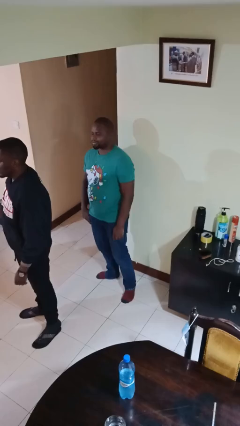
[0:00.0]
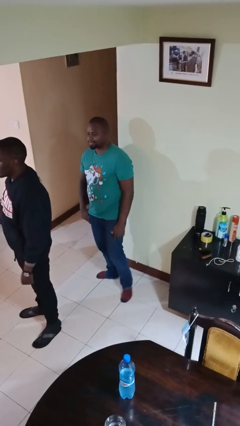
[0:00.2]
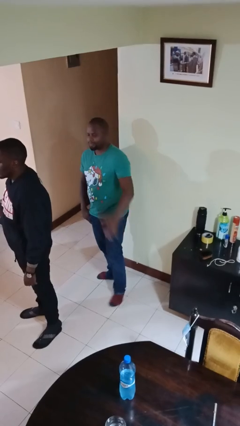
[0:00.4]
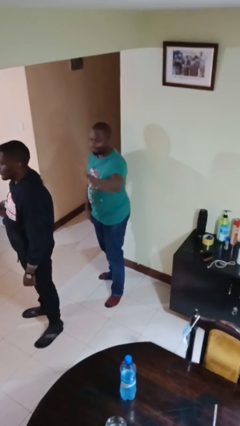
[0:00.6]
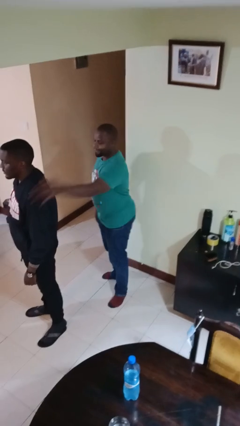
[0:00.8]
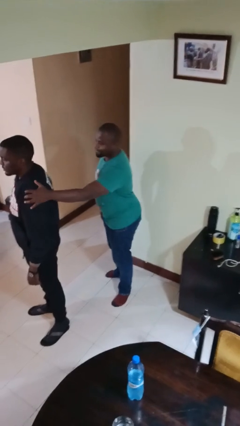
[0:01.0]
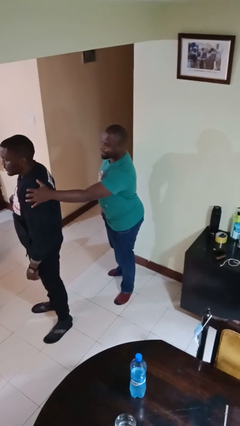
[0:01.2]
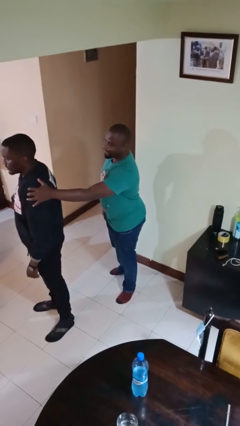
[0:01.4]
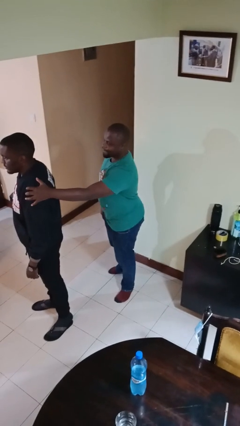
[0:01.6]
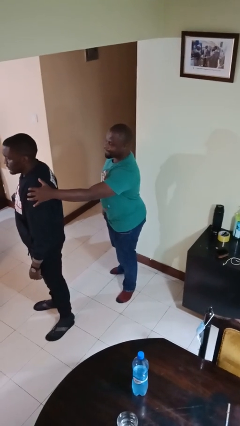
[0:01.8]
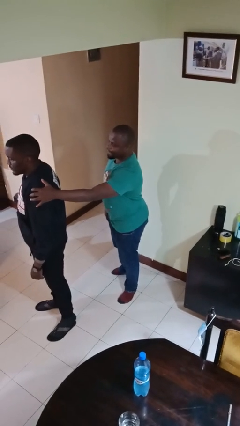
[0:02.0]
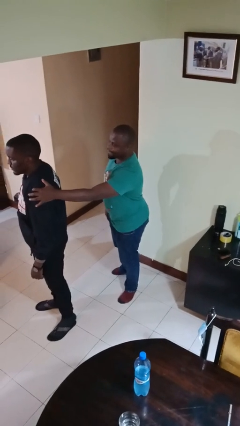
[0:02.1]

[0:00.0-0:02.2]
person grabs person by shoulder

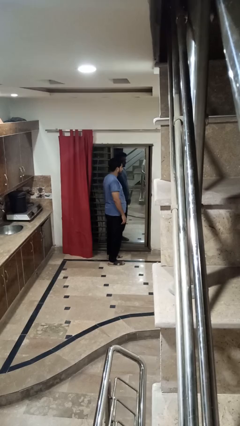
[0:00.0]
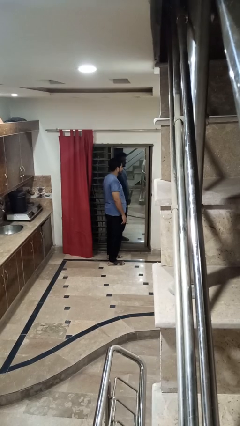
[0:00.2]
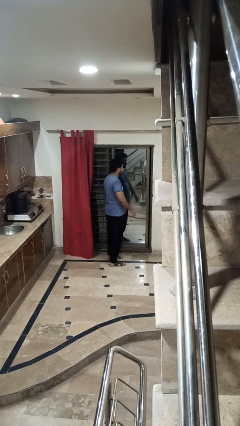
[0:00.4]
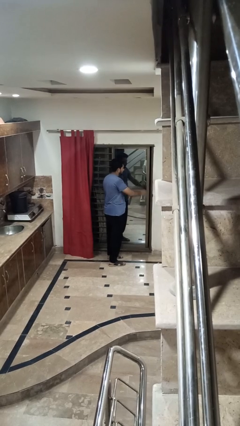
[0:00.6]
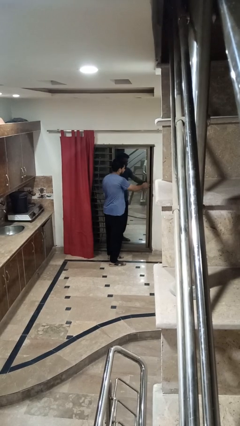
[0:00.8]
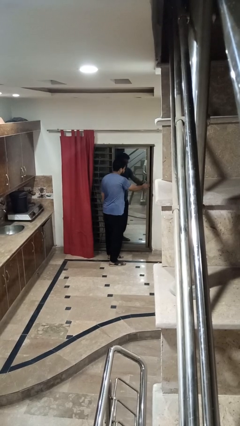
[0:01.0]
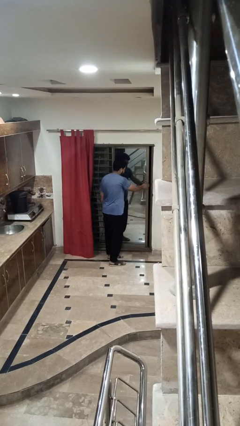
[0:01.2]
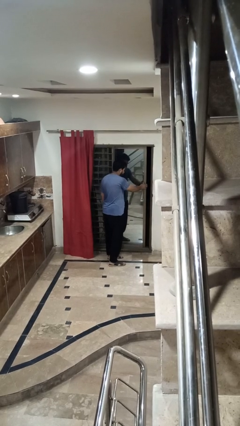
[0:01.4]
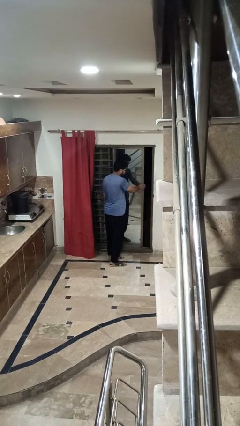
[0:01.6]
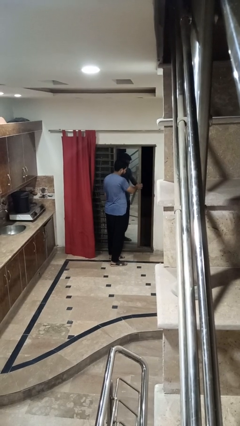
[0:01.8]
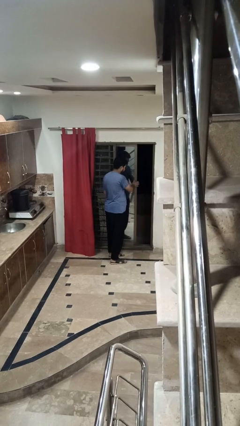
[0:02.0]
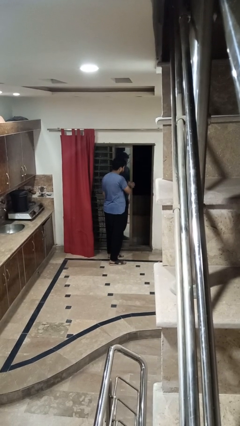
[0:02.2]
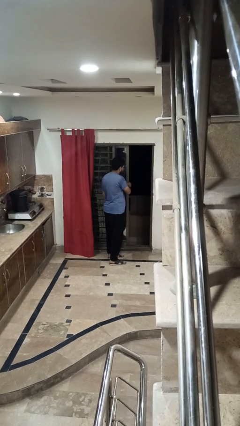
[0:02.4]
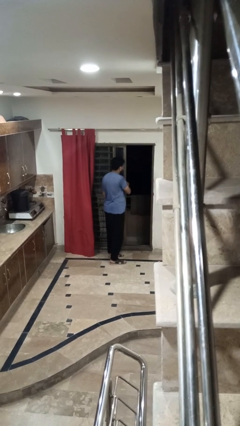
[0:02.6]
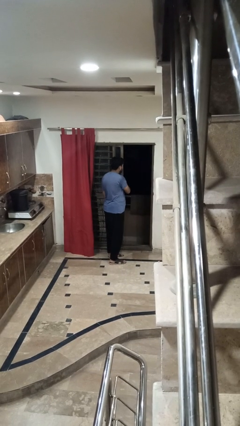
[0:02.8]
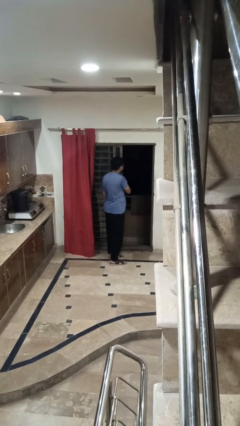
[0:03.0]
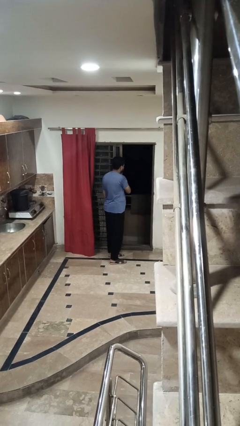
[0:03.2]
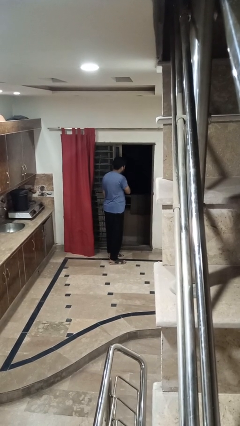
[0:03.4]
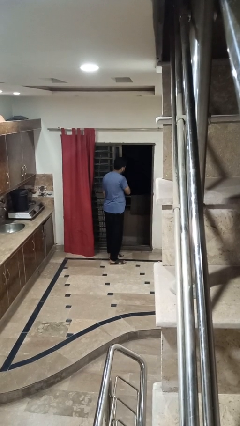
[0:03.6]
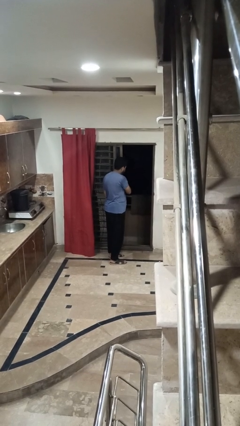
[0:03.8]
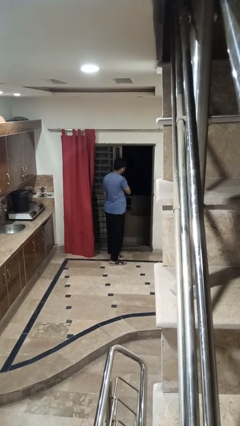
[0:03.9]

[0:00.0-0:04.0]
person opens sliding door

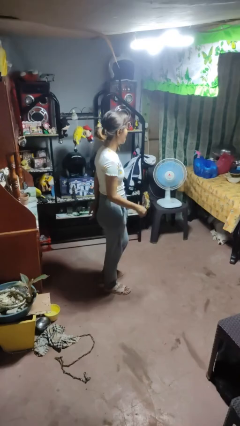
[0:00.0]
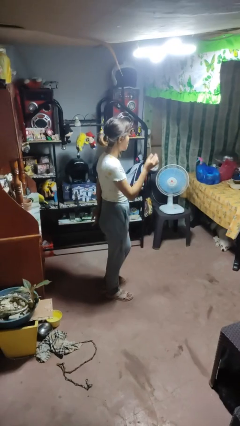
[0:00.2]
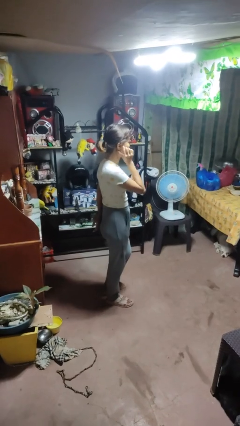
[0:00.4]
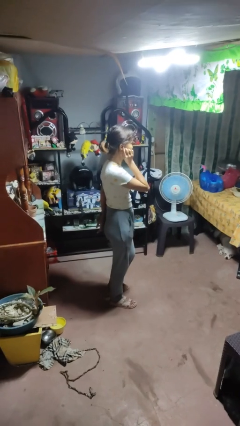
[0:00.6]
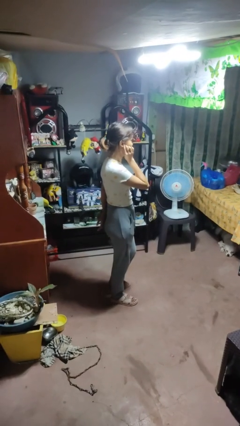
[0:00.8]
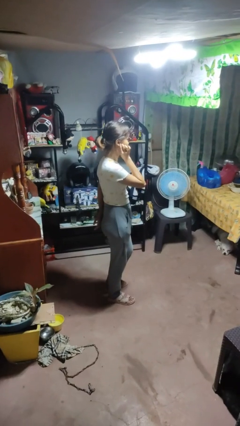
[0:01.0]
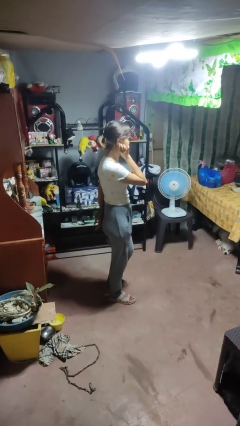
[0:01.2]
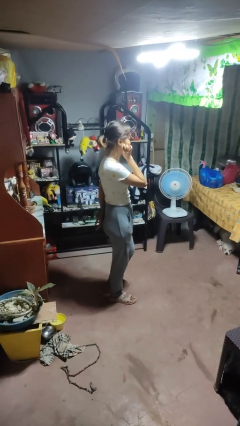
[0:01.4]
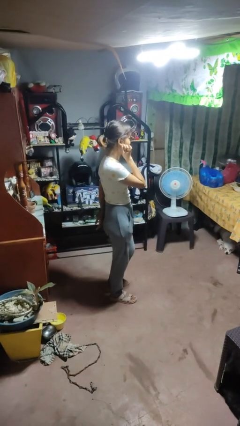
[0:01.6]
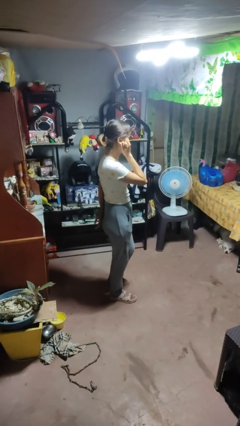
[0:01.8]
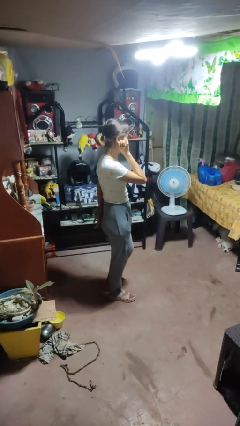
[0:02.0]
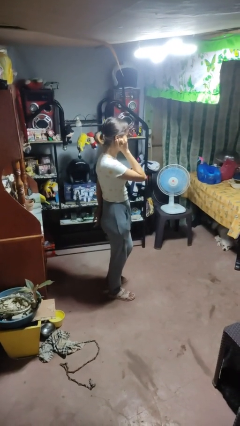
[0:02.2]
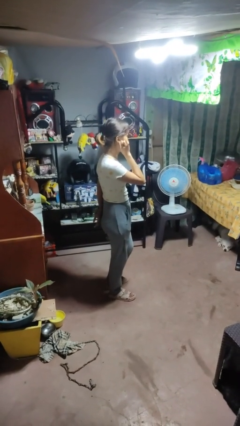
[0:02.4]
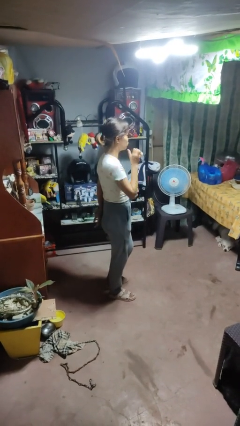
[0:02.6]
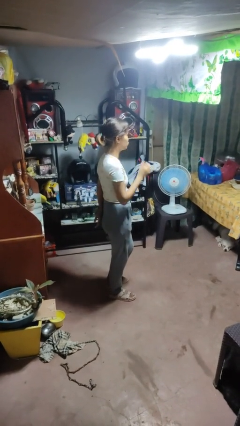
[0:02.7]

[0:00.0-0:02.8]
person touches earlobe

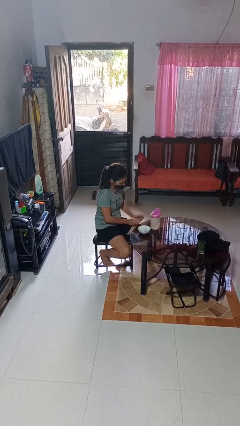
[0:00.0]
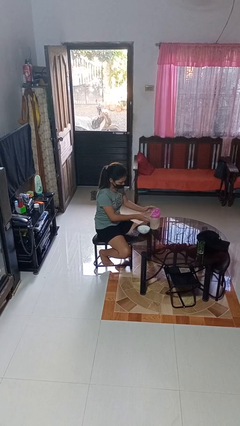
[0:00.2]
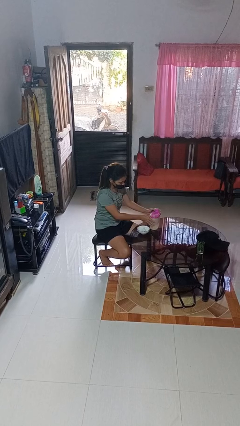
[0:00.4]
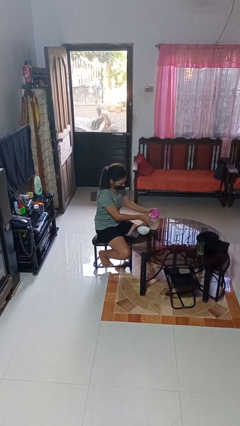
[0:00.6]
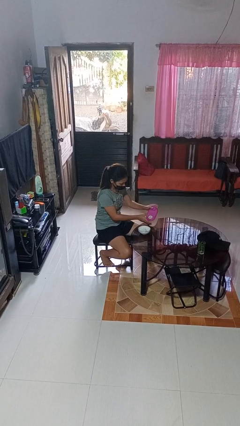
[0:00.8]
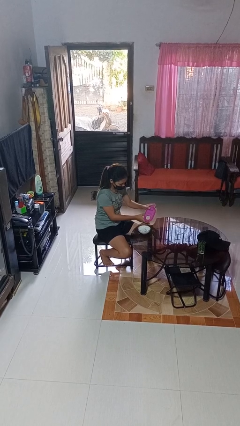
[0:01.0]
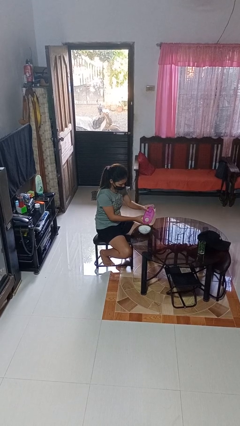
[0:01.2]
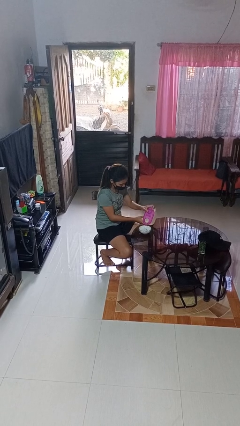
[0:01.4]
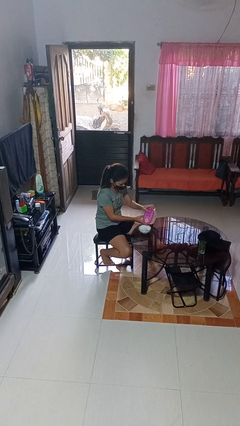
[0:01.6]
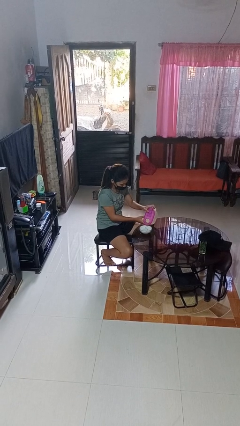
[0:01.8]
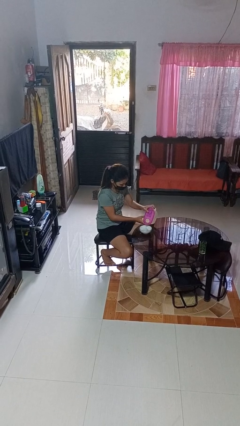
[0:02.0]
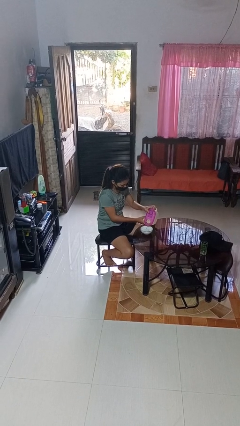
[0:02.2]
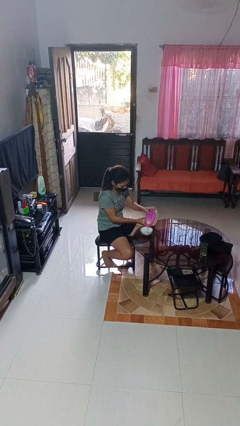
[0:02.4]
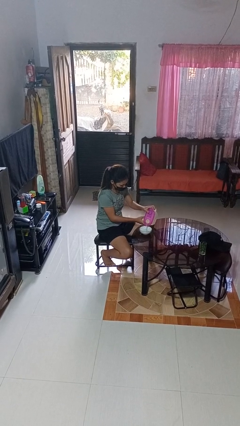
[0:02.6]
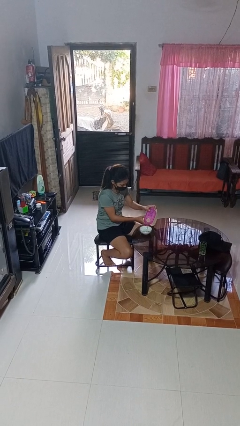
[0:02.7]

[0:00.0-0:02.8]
person pours into bowl

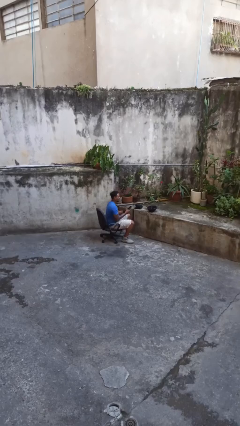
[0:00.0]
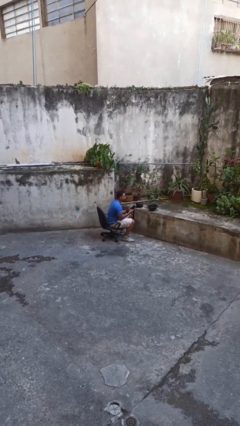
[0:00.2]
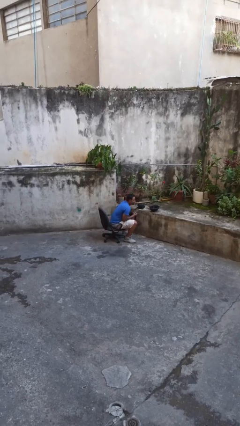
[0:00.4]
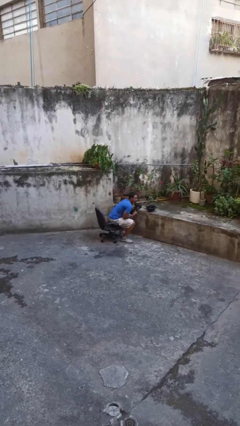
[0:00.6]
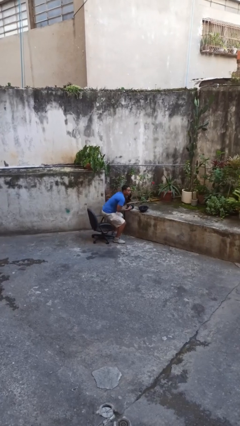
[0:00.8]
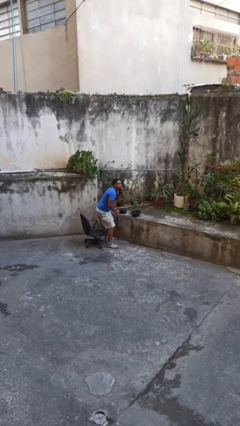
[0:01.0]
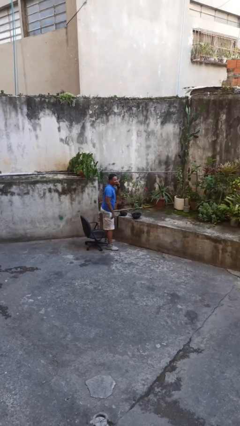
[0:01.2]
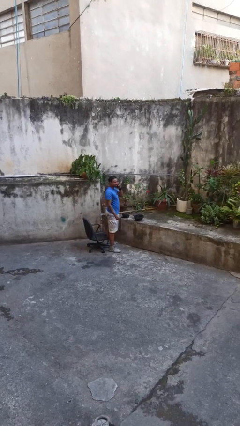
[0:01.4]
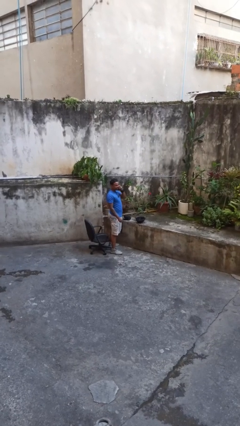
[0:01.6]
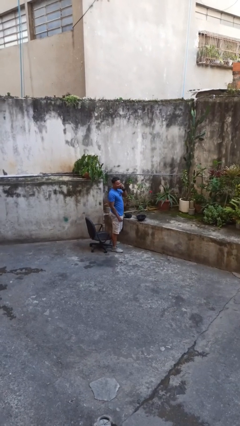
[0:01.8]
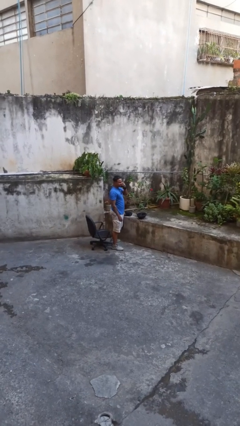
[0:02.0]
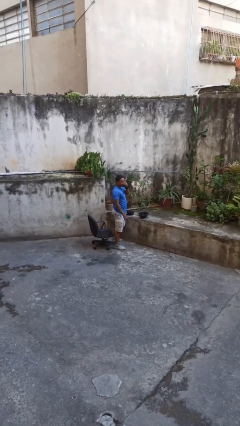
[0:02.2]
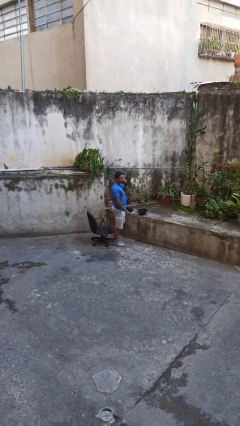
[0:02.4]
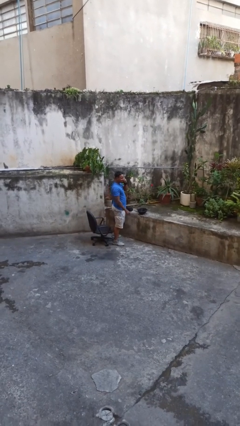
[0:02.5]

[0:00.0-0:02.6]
person stands up

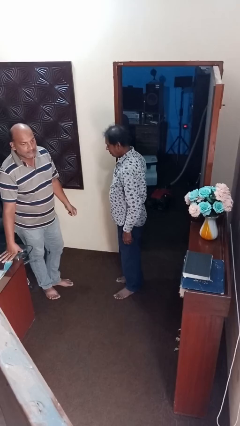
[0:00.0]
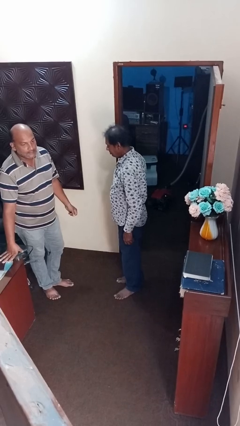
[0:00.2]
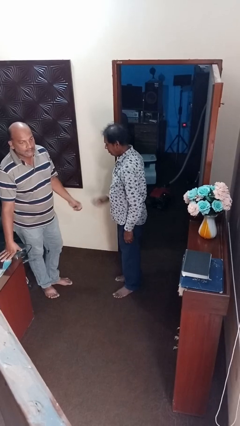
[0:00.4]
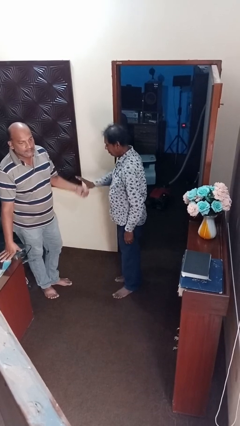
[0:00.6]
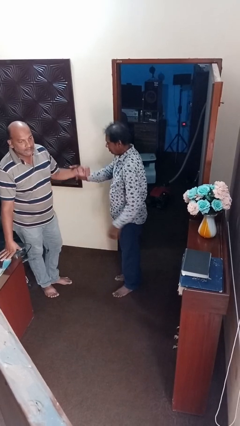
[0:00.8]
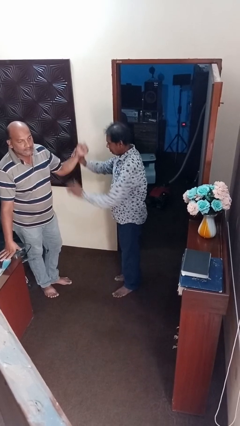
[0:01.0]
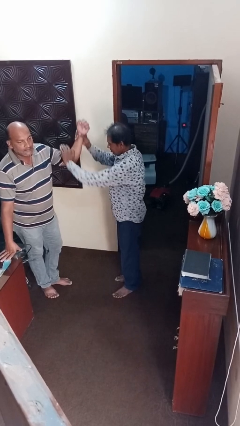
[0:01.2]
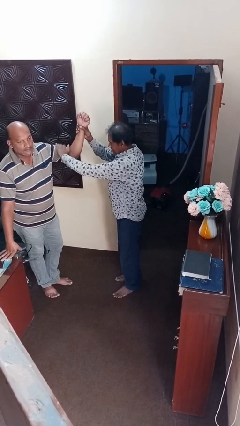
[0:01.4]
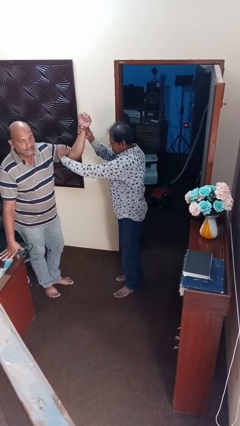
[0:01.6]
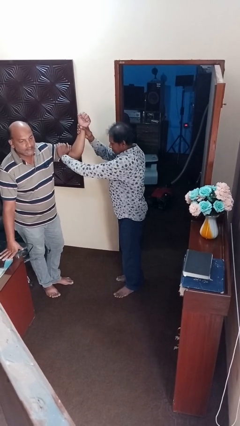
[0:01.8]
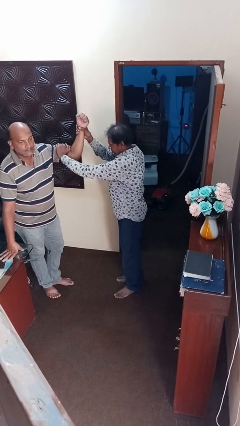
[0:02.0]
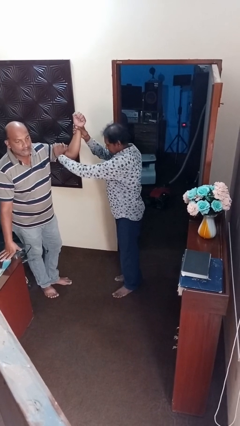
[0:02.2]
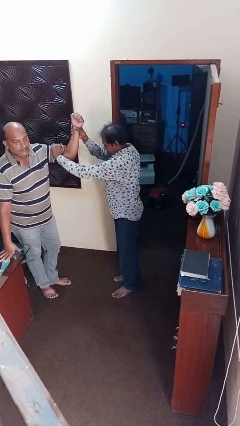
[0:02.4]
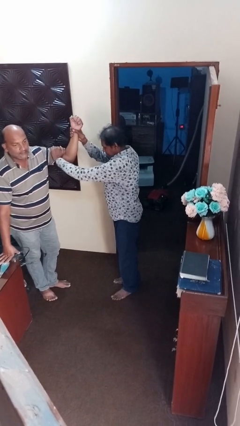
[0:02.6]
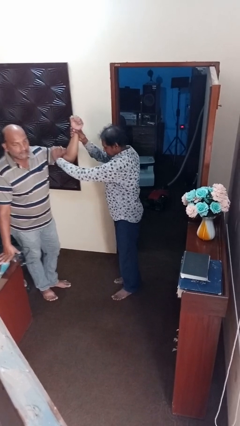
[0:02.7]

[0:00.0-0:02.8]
person grabs person by bicep

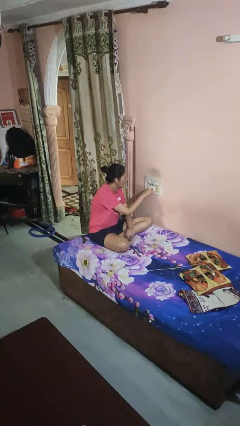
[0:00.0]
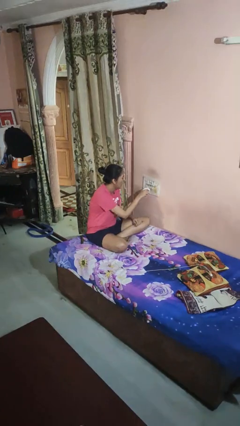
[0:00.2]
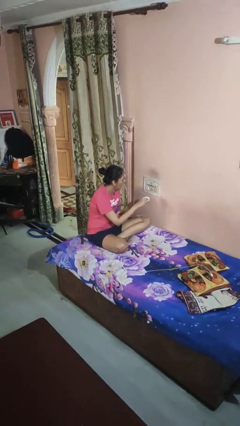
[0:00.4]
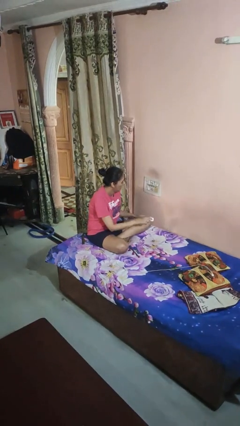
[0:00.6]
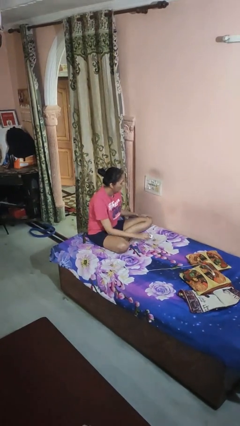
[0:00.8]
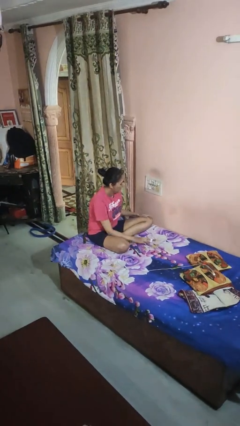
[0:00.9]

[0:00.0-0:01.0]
person unplugs from electrical socket
